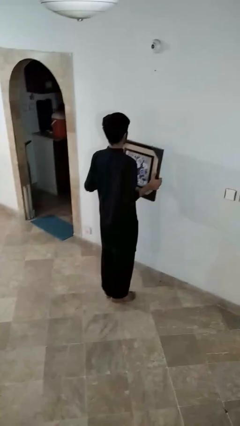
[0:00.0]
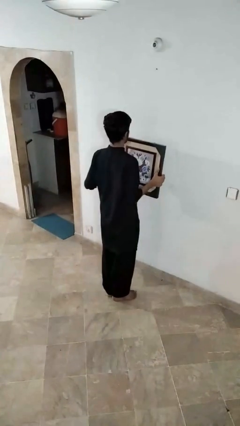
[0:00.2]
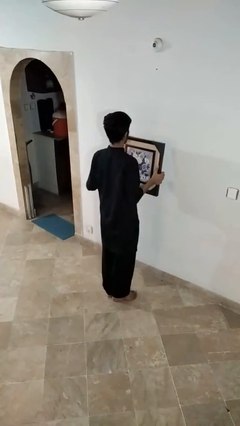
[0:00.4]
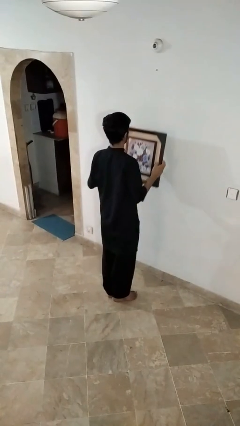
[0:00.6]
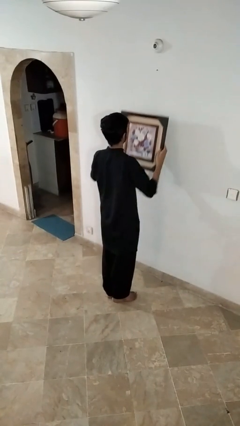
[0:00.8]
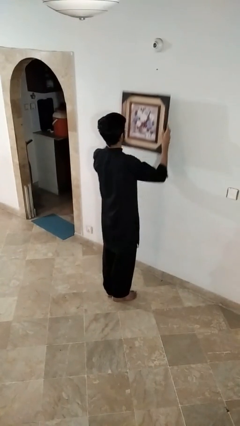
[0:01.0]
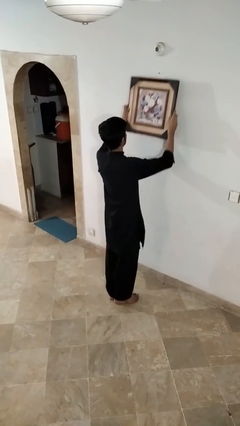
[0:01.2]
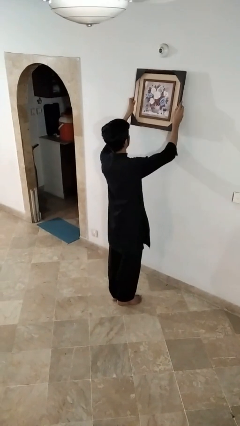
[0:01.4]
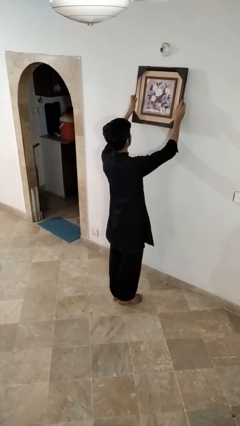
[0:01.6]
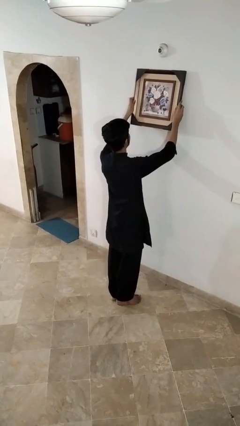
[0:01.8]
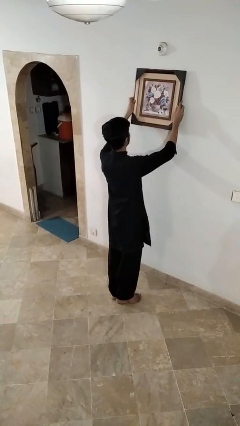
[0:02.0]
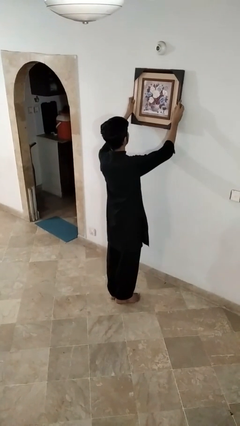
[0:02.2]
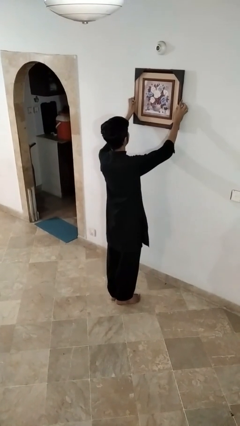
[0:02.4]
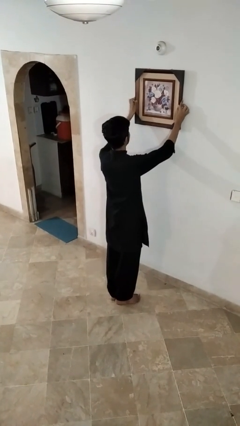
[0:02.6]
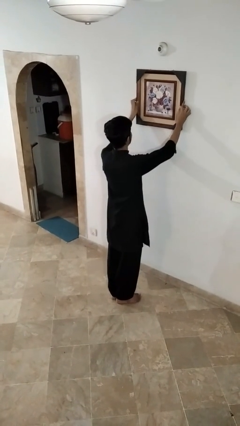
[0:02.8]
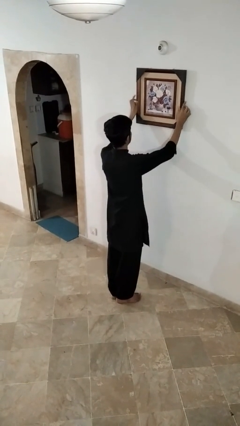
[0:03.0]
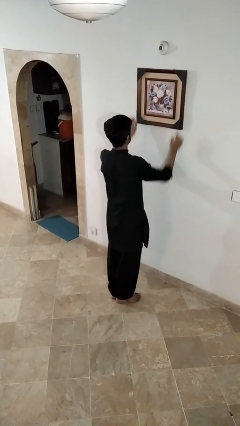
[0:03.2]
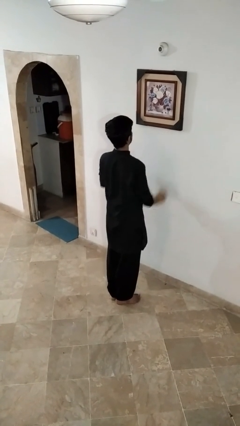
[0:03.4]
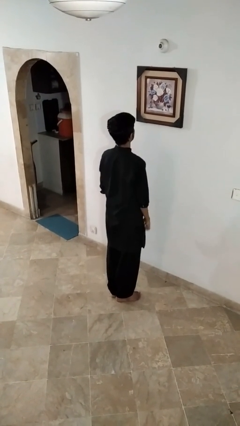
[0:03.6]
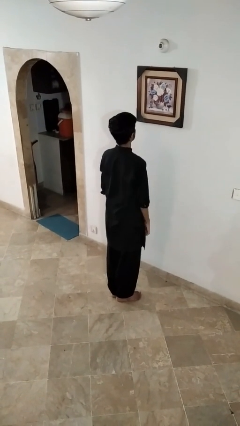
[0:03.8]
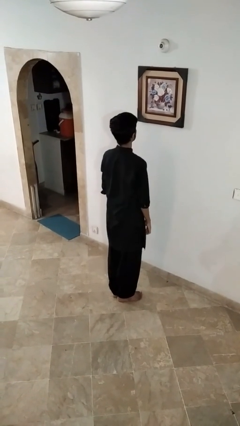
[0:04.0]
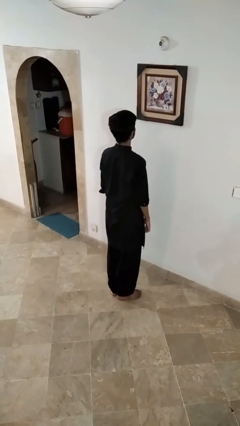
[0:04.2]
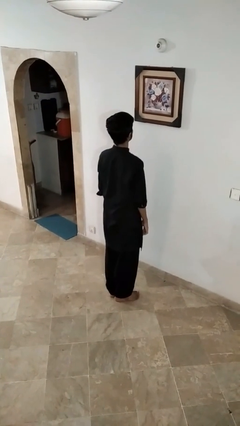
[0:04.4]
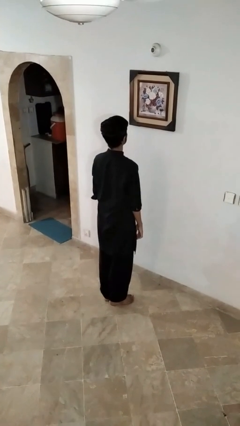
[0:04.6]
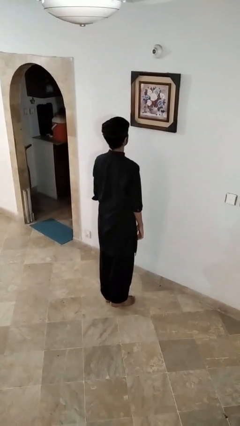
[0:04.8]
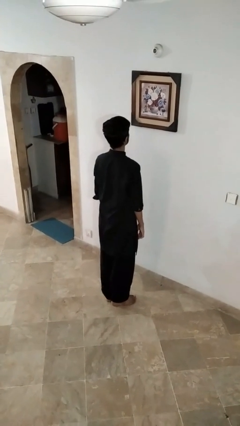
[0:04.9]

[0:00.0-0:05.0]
person puts up picture frame

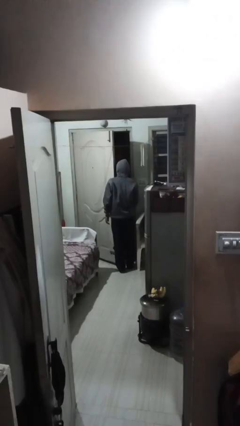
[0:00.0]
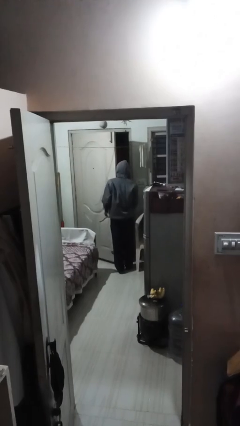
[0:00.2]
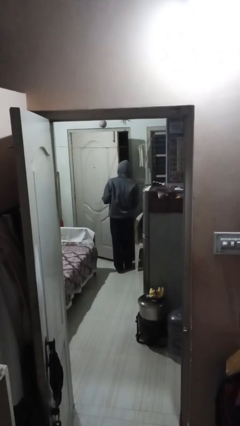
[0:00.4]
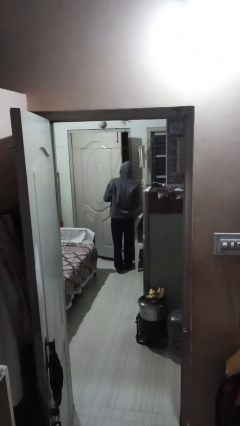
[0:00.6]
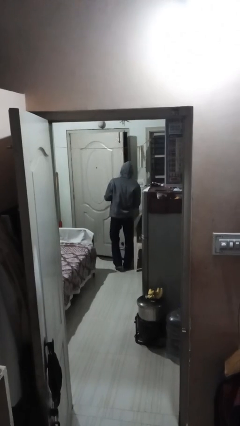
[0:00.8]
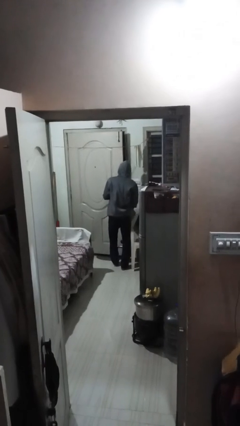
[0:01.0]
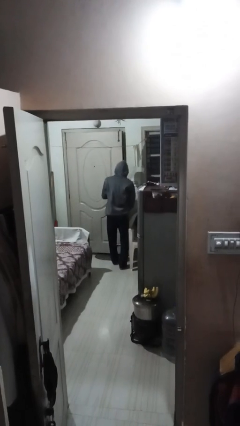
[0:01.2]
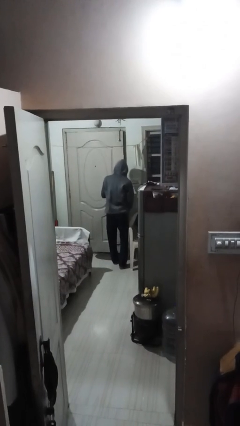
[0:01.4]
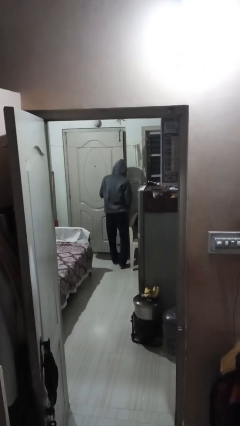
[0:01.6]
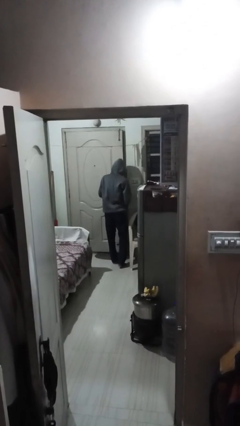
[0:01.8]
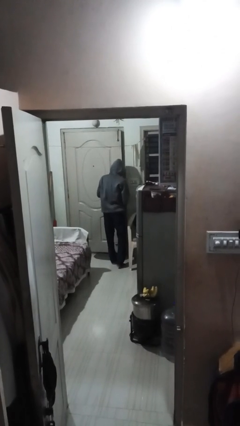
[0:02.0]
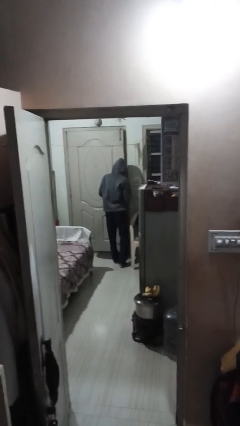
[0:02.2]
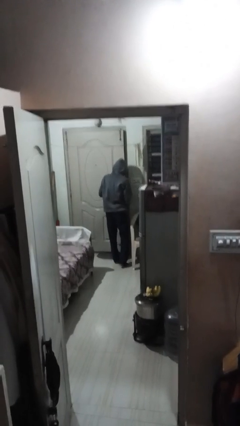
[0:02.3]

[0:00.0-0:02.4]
person closes facility door

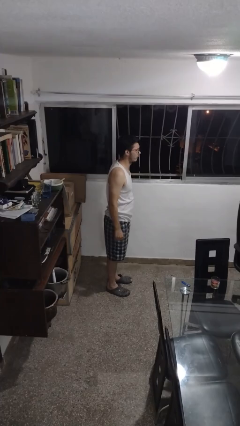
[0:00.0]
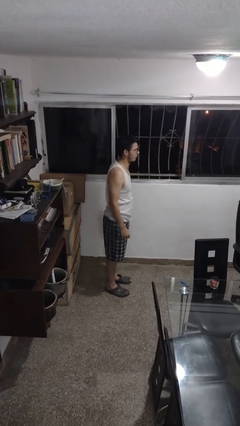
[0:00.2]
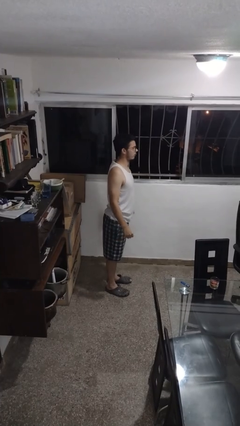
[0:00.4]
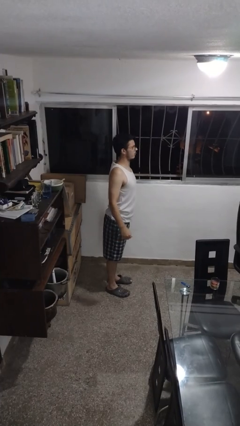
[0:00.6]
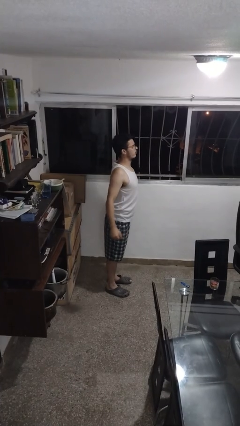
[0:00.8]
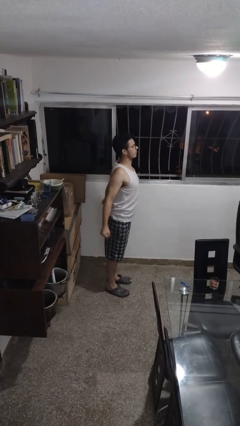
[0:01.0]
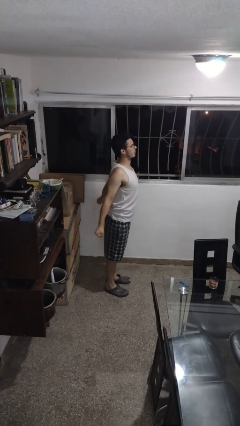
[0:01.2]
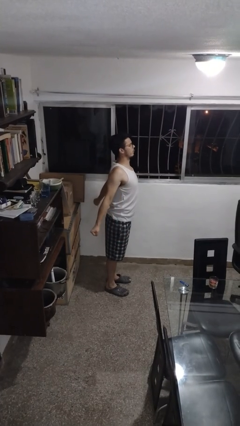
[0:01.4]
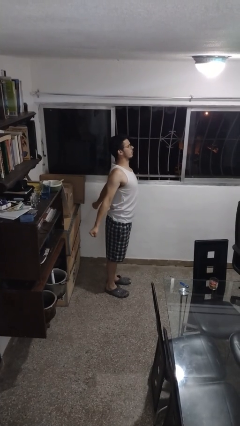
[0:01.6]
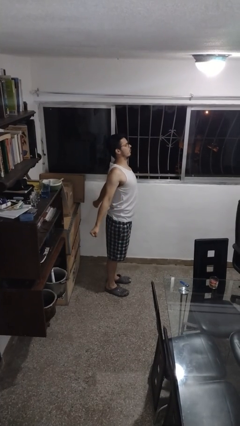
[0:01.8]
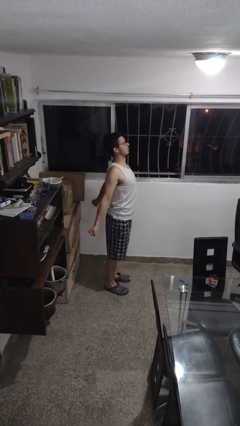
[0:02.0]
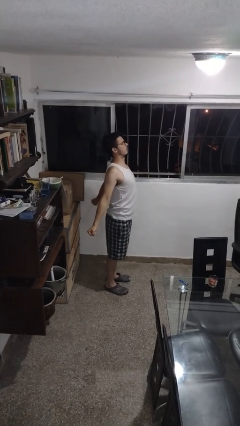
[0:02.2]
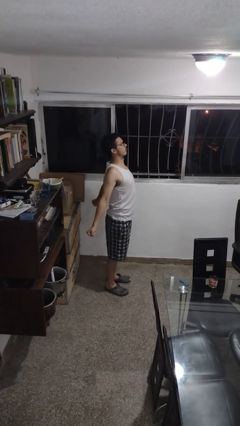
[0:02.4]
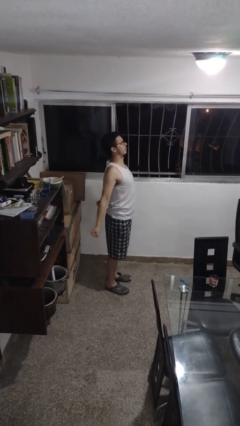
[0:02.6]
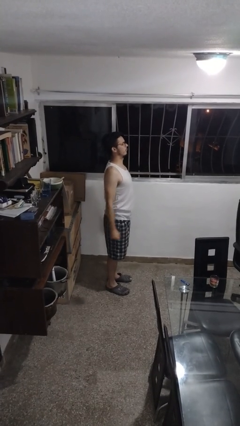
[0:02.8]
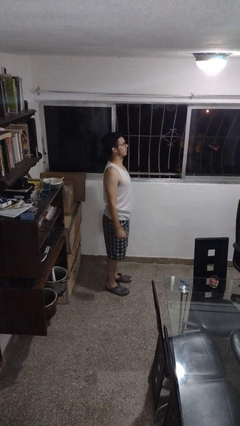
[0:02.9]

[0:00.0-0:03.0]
person stretches back

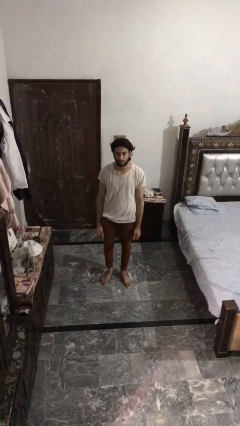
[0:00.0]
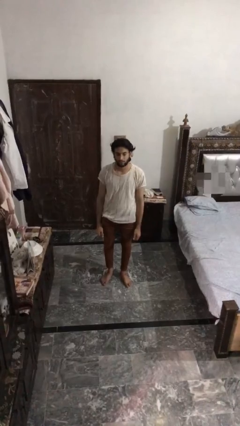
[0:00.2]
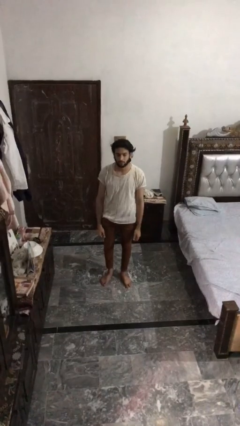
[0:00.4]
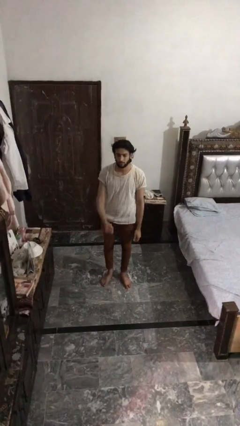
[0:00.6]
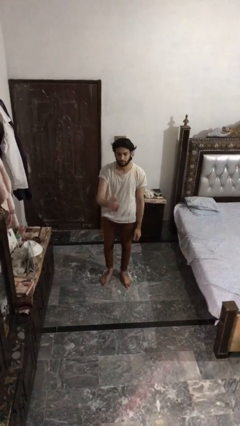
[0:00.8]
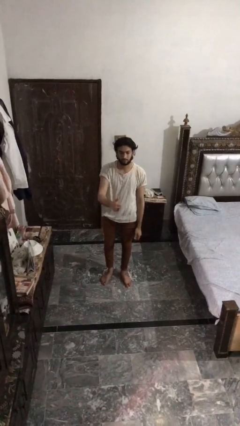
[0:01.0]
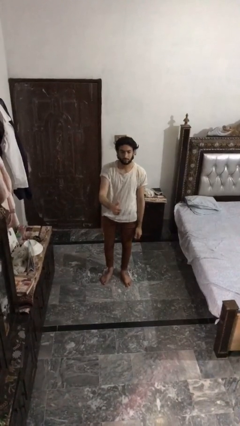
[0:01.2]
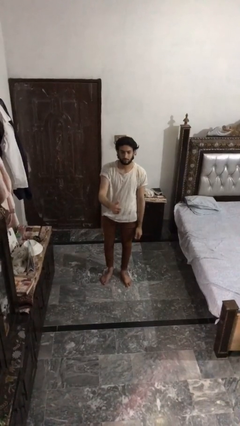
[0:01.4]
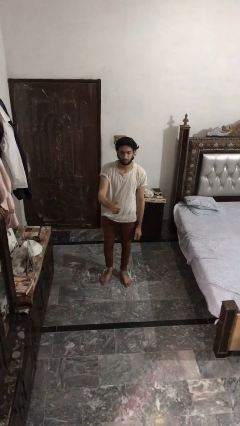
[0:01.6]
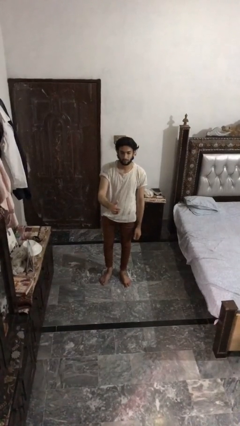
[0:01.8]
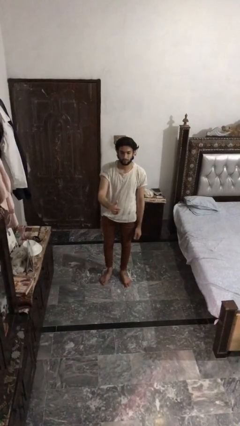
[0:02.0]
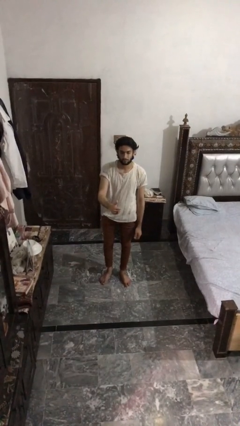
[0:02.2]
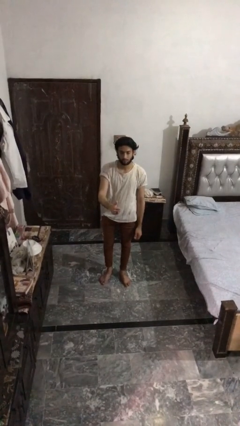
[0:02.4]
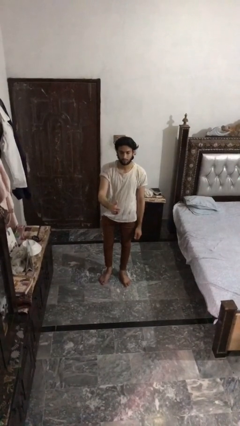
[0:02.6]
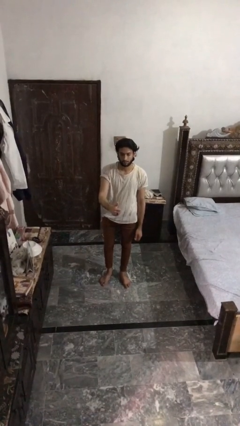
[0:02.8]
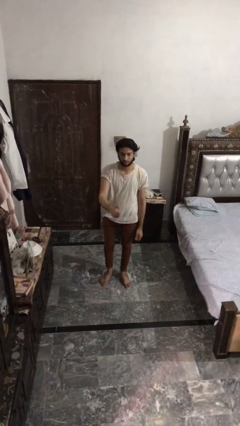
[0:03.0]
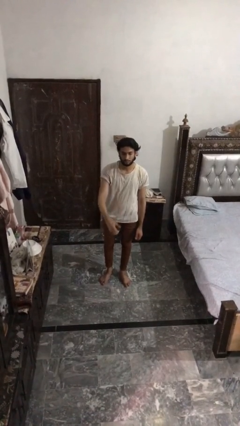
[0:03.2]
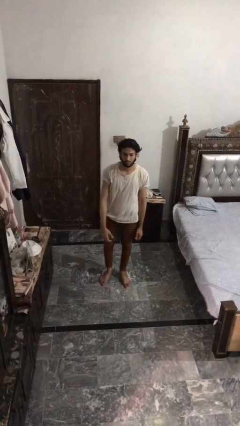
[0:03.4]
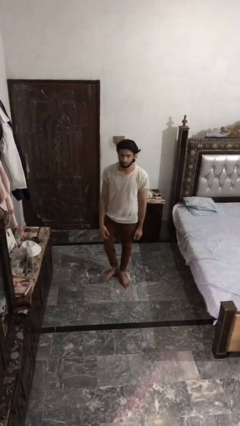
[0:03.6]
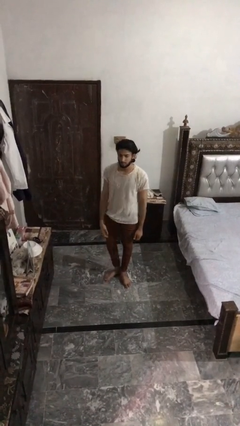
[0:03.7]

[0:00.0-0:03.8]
person gestures thumbs up

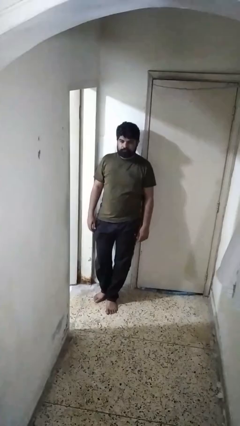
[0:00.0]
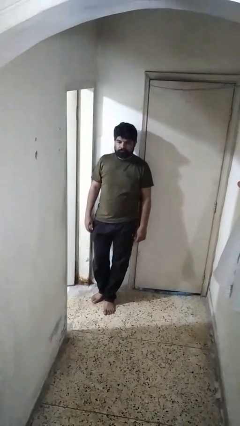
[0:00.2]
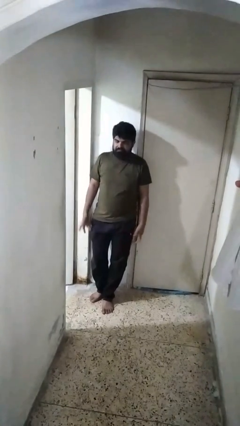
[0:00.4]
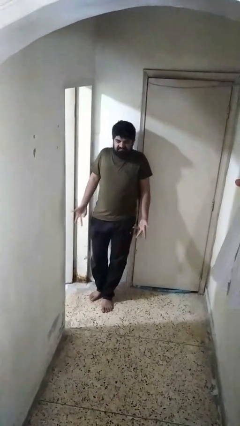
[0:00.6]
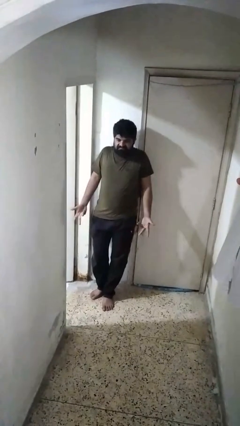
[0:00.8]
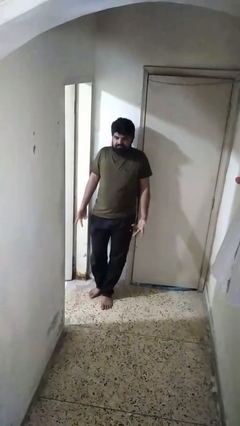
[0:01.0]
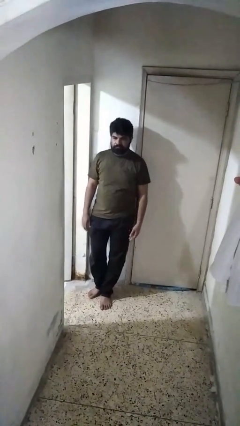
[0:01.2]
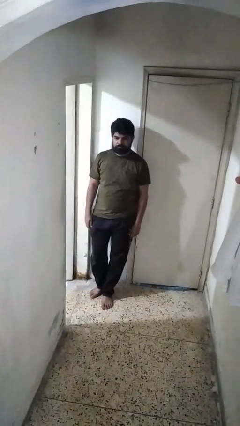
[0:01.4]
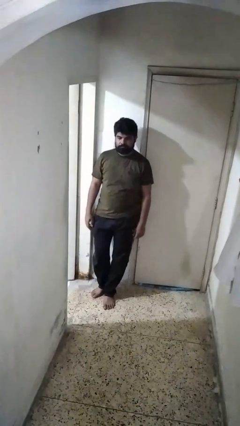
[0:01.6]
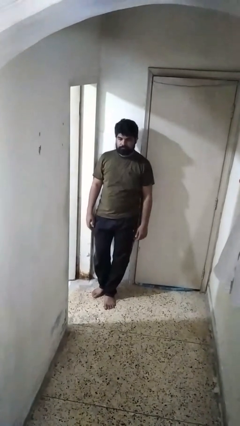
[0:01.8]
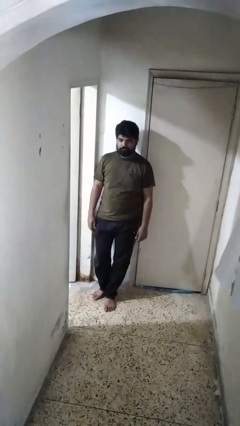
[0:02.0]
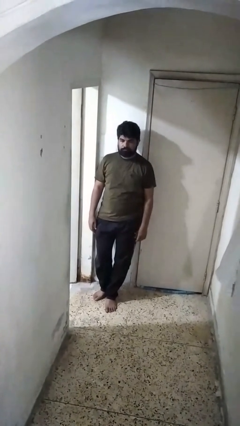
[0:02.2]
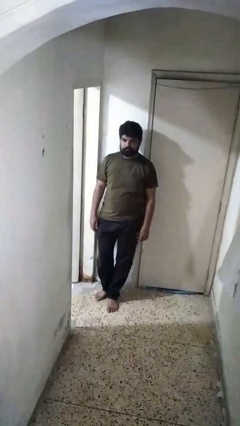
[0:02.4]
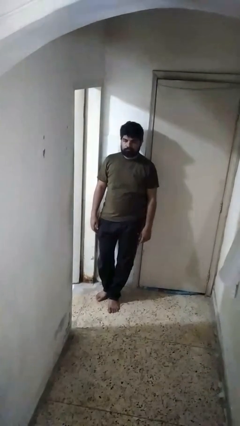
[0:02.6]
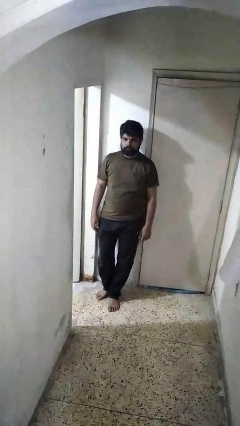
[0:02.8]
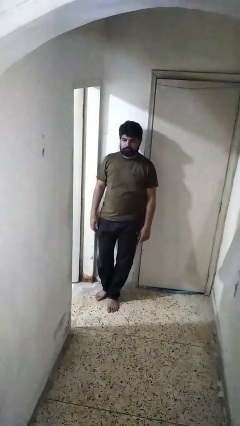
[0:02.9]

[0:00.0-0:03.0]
person shrugs

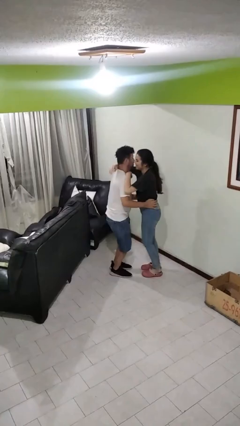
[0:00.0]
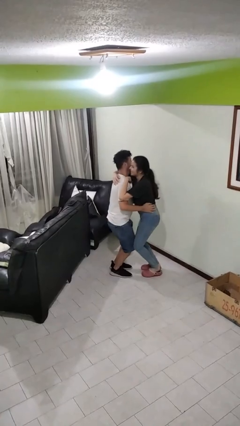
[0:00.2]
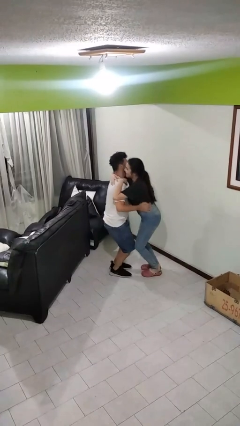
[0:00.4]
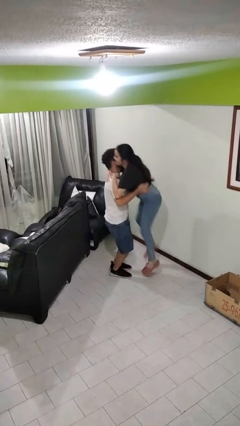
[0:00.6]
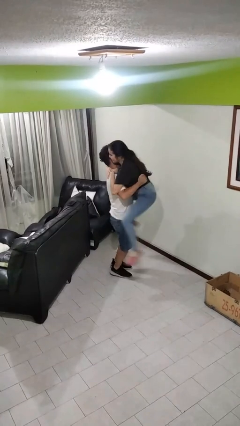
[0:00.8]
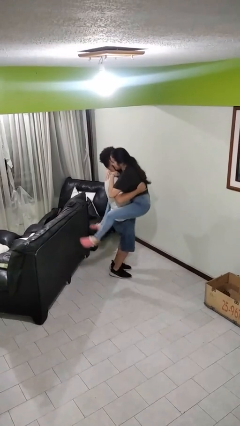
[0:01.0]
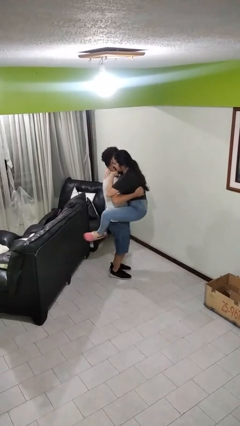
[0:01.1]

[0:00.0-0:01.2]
person picks up person
